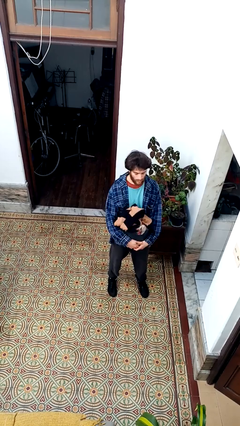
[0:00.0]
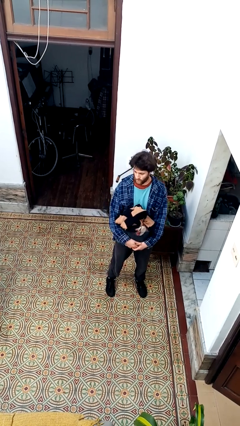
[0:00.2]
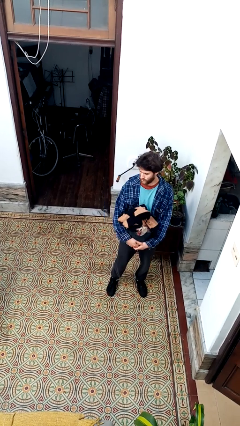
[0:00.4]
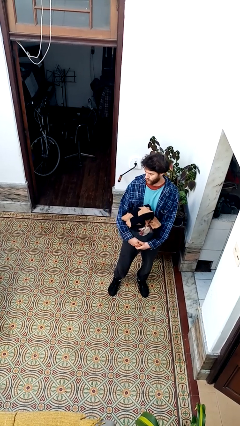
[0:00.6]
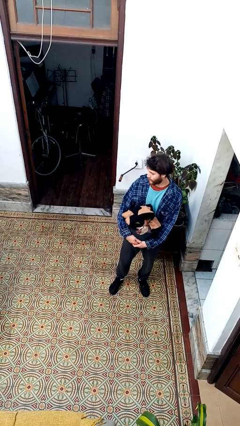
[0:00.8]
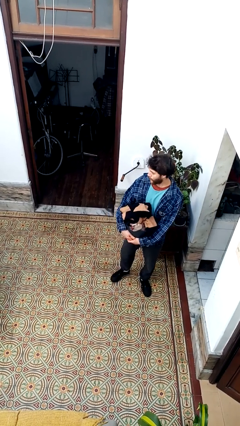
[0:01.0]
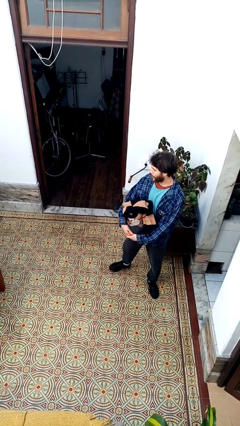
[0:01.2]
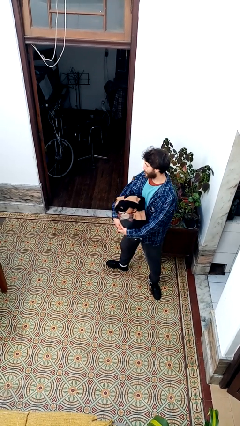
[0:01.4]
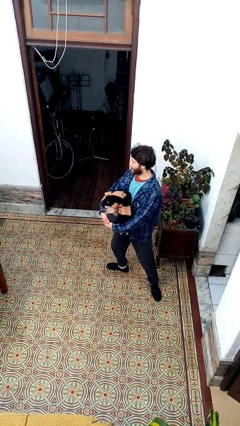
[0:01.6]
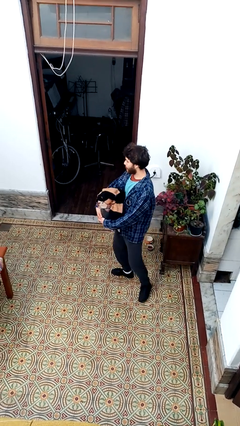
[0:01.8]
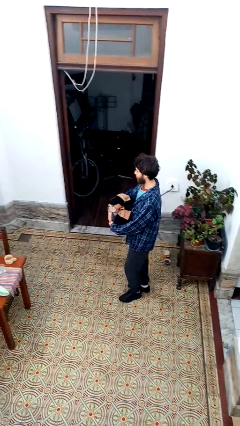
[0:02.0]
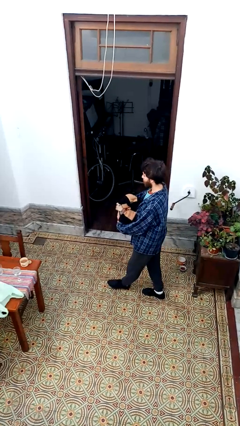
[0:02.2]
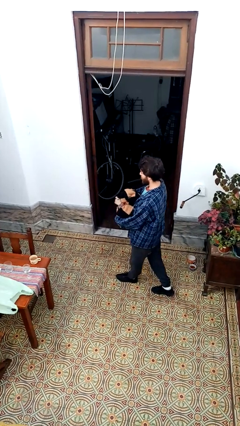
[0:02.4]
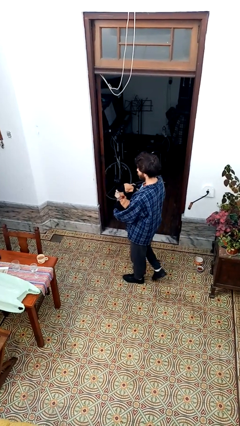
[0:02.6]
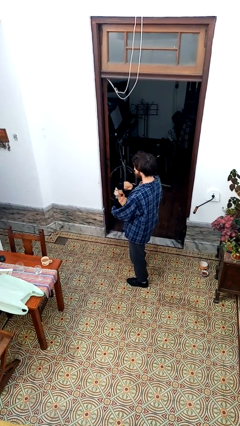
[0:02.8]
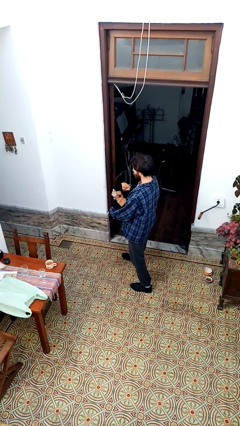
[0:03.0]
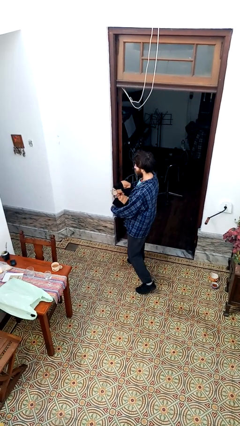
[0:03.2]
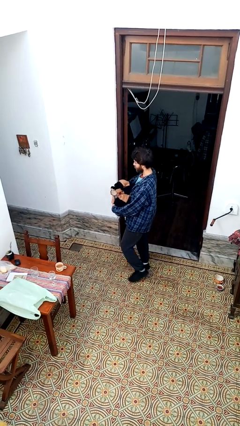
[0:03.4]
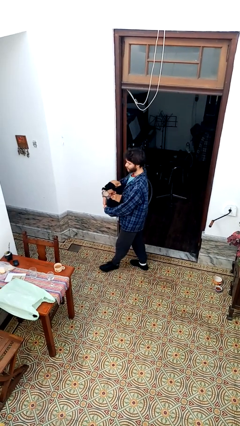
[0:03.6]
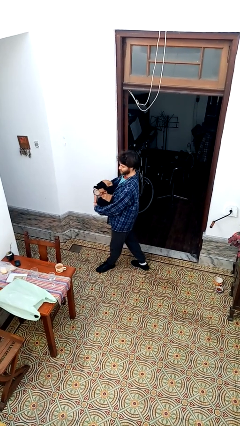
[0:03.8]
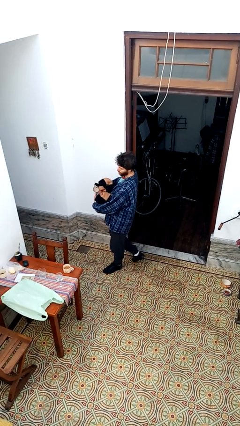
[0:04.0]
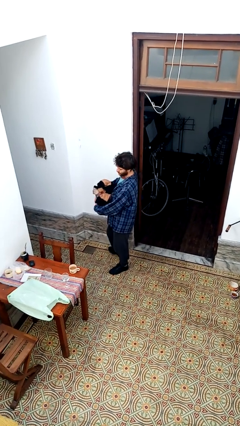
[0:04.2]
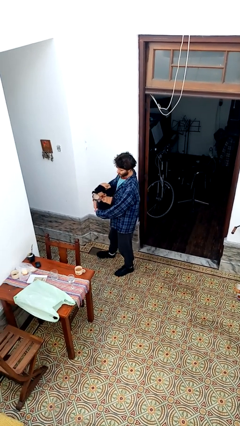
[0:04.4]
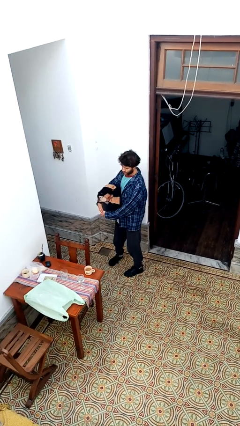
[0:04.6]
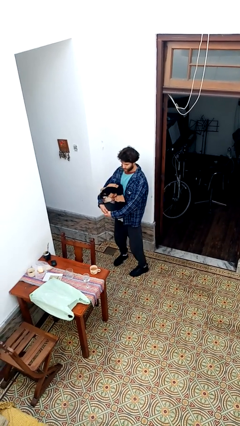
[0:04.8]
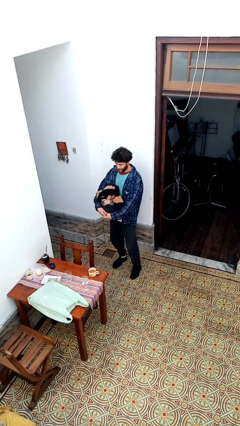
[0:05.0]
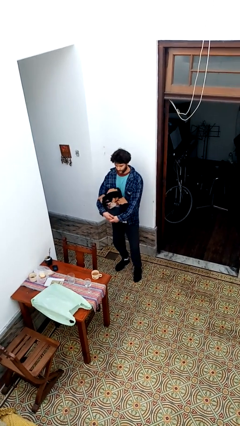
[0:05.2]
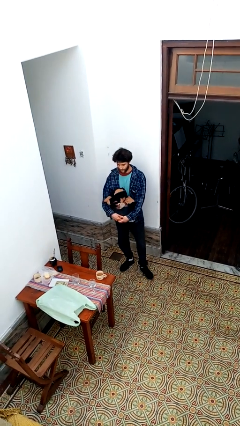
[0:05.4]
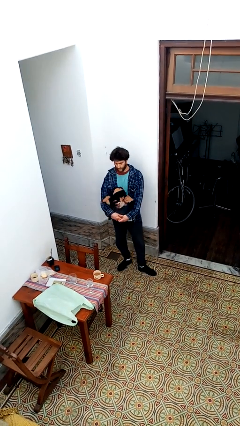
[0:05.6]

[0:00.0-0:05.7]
person carries laundry basket

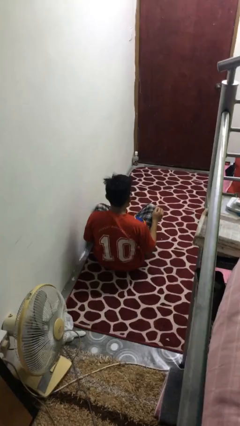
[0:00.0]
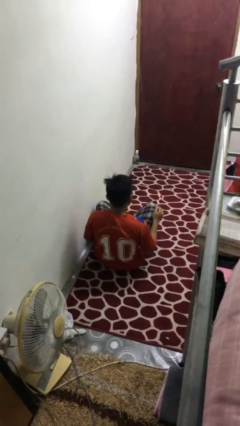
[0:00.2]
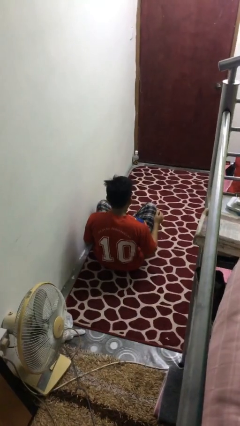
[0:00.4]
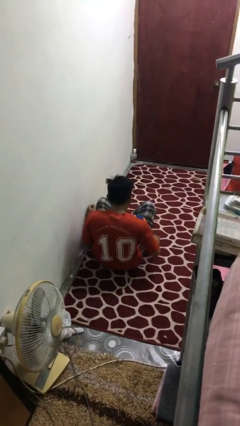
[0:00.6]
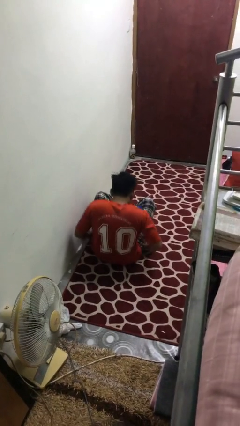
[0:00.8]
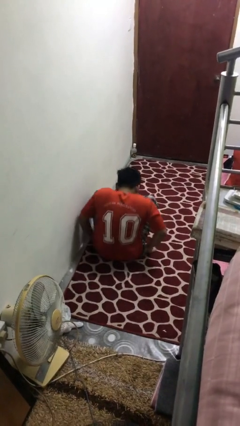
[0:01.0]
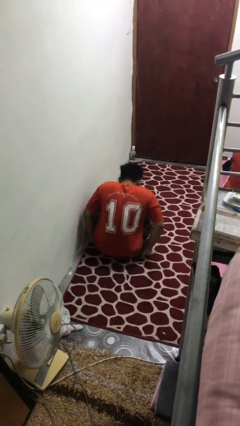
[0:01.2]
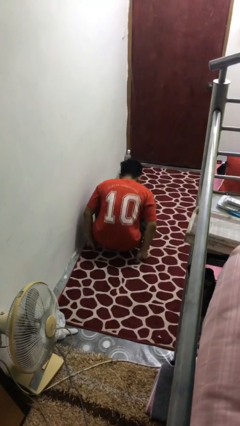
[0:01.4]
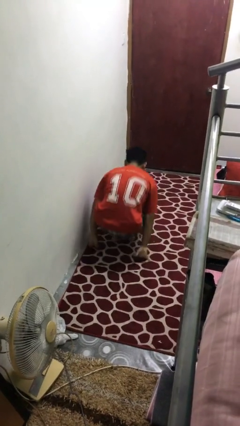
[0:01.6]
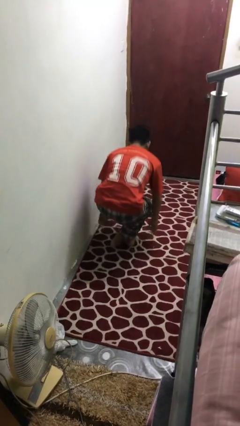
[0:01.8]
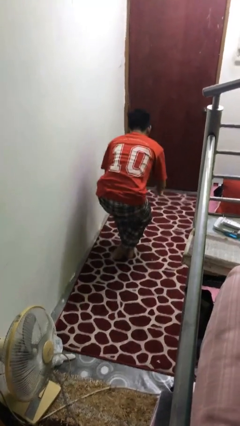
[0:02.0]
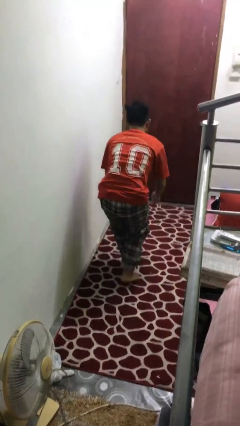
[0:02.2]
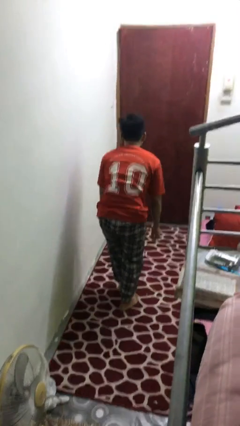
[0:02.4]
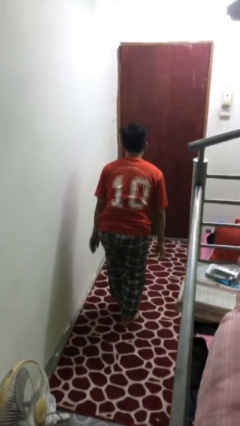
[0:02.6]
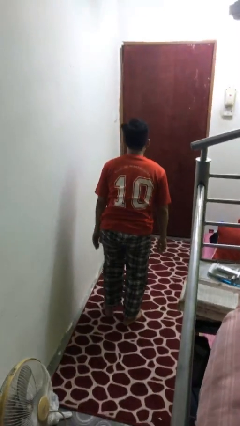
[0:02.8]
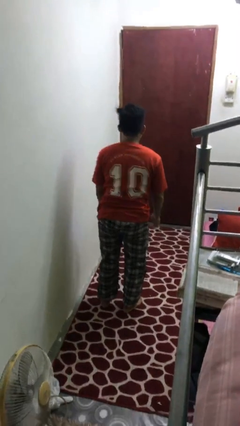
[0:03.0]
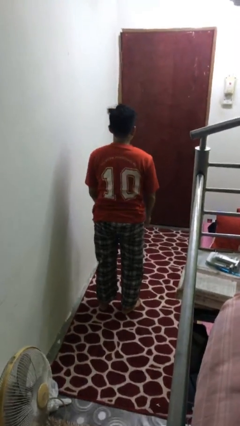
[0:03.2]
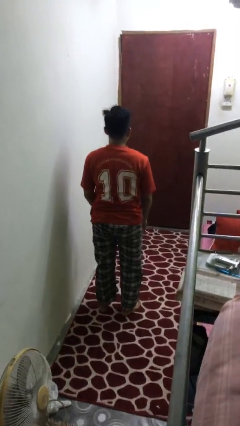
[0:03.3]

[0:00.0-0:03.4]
person stands up from floor

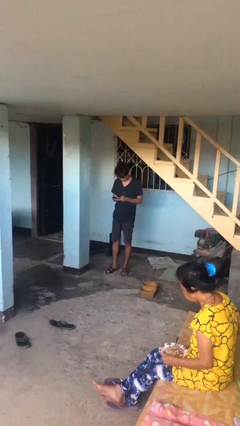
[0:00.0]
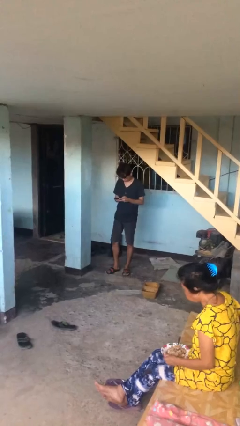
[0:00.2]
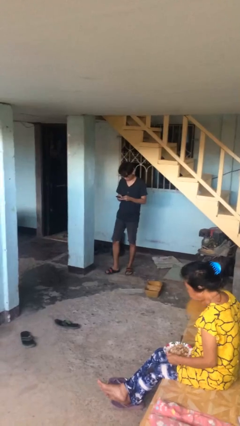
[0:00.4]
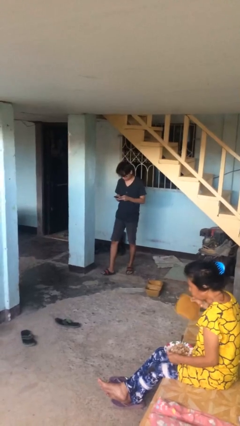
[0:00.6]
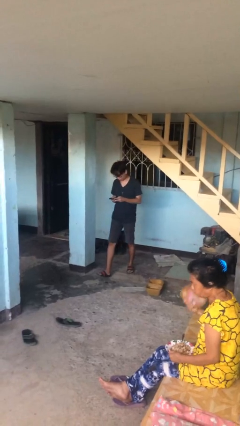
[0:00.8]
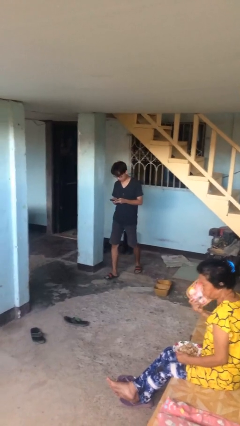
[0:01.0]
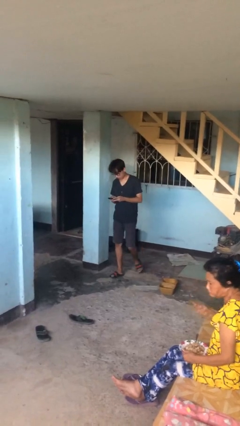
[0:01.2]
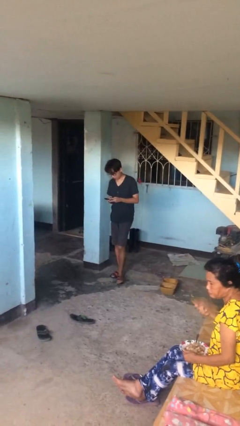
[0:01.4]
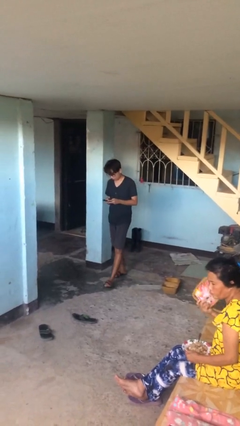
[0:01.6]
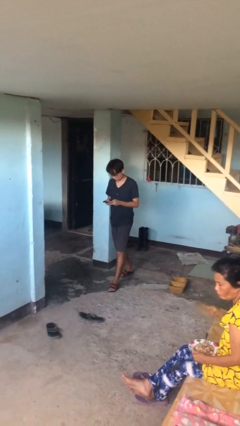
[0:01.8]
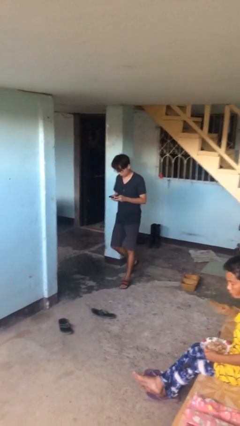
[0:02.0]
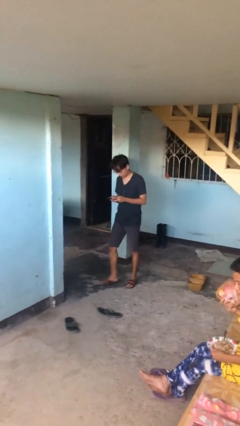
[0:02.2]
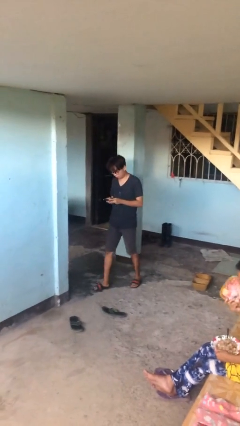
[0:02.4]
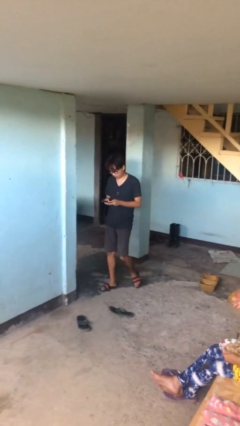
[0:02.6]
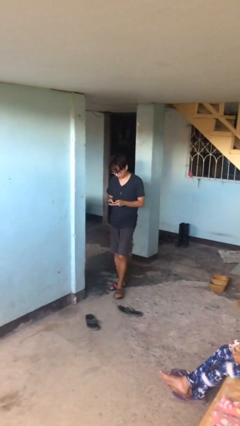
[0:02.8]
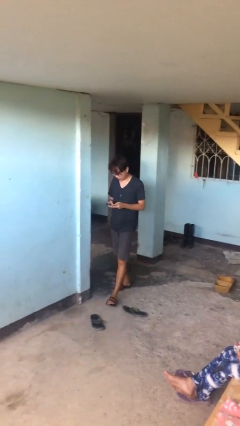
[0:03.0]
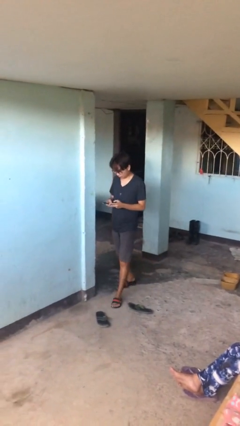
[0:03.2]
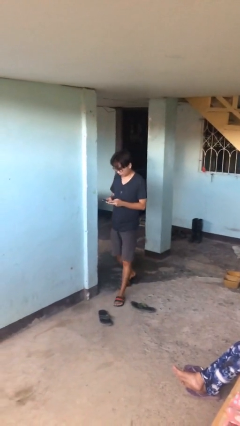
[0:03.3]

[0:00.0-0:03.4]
person texts on phone

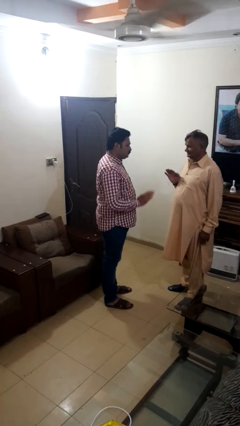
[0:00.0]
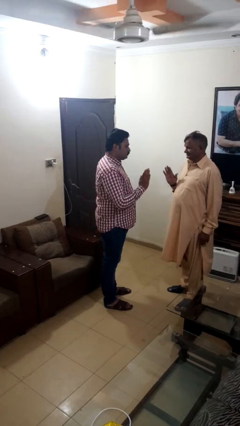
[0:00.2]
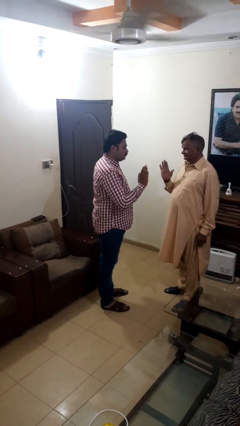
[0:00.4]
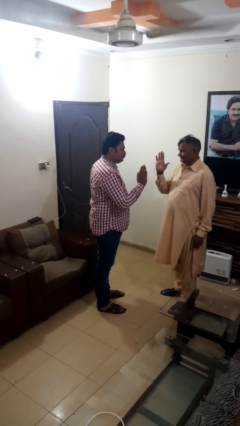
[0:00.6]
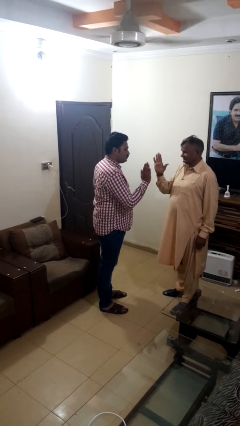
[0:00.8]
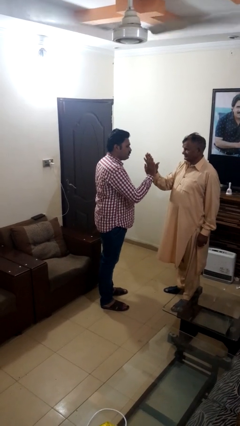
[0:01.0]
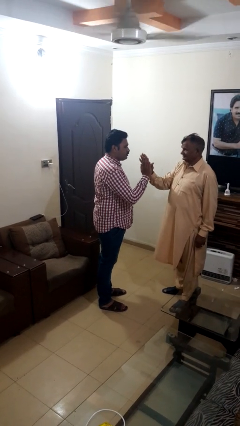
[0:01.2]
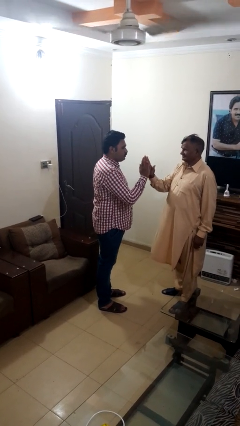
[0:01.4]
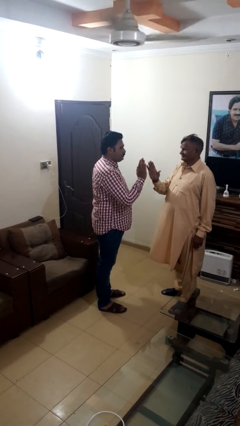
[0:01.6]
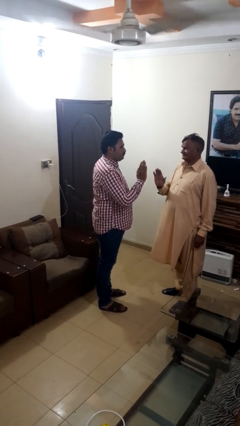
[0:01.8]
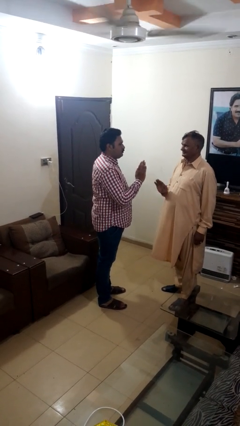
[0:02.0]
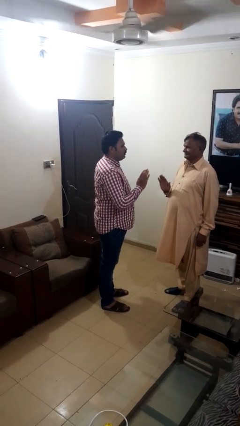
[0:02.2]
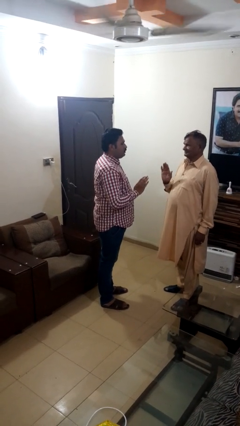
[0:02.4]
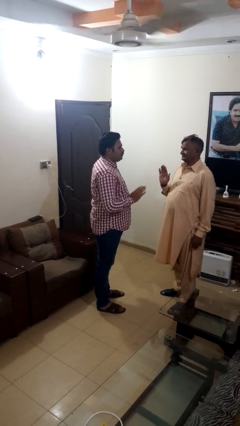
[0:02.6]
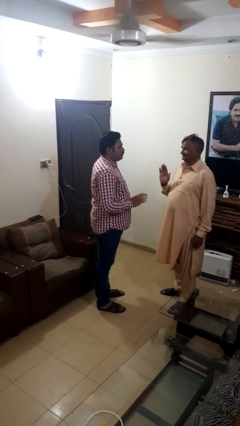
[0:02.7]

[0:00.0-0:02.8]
person highfives hand

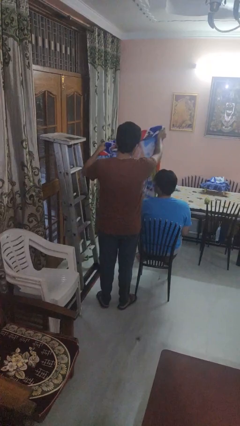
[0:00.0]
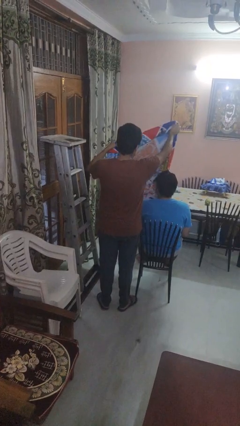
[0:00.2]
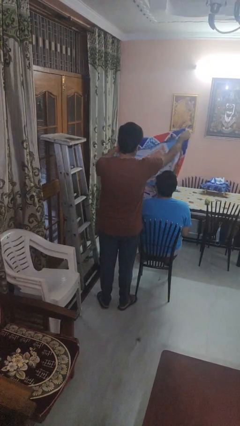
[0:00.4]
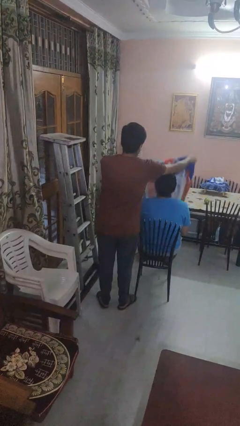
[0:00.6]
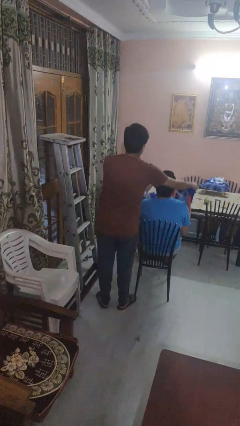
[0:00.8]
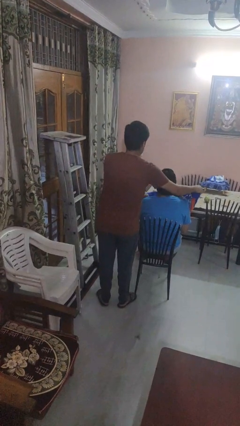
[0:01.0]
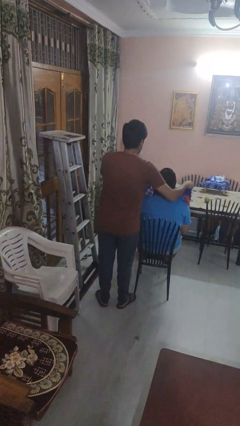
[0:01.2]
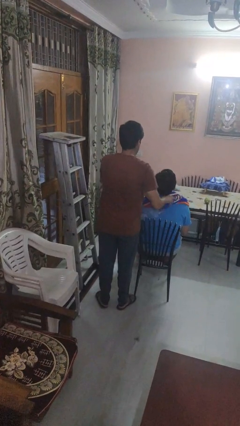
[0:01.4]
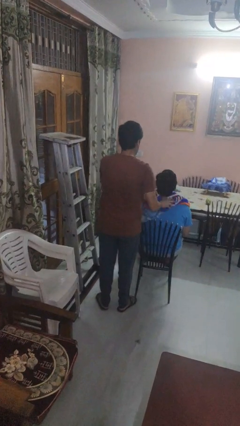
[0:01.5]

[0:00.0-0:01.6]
person covers friend with blanket

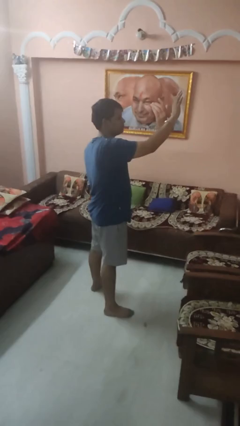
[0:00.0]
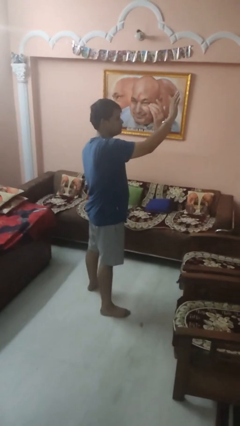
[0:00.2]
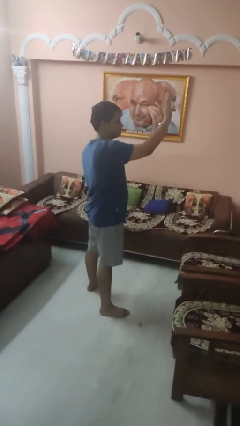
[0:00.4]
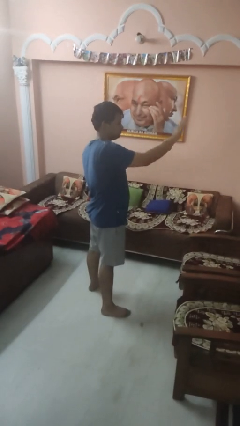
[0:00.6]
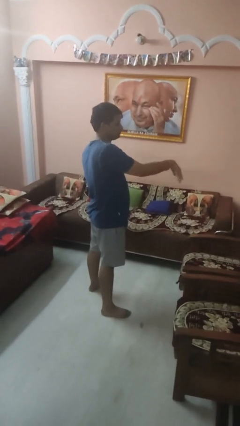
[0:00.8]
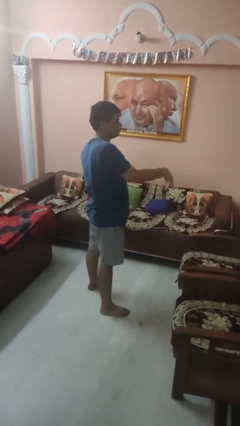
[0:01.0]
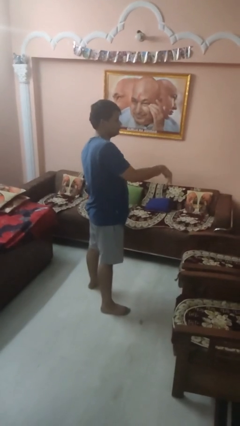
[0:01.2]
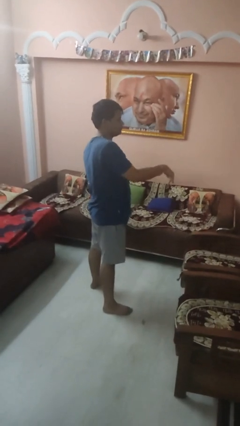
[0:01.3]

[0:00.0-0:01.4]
person gestures swipe down
